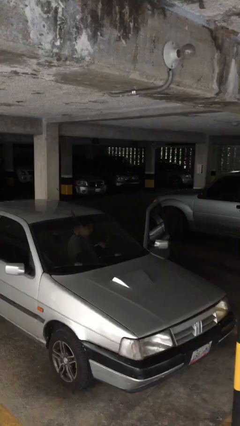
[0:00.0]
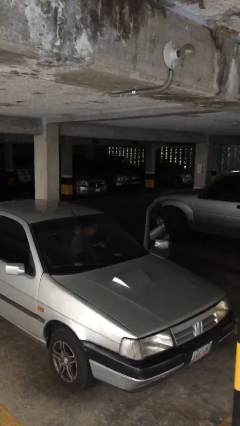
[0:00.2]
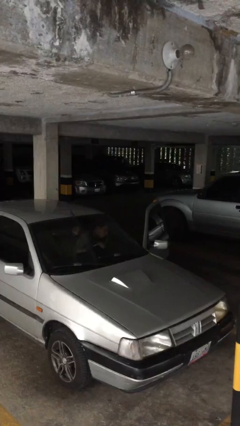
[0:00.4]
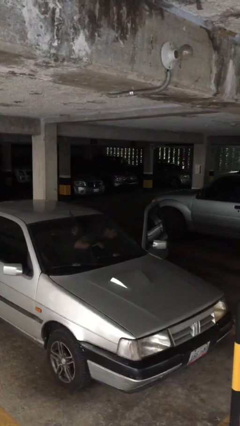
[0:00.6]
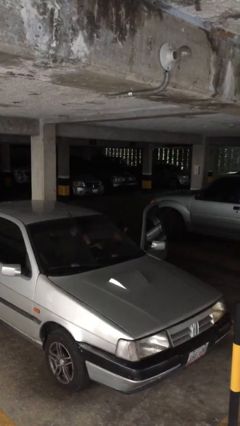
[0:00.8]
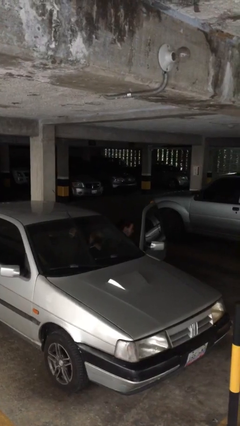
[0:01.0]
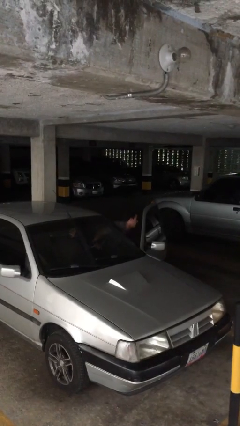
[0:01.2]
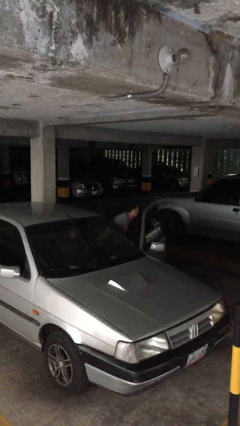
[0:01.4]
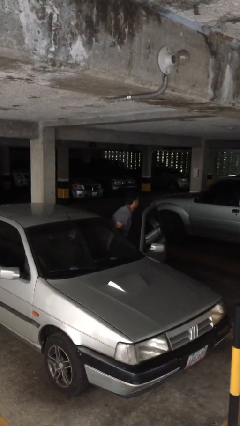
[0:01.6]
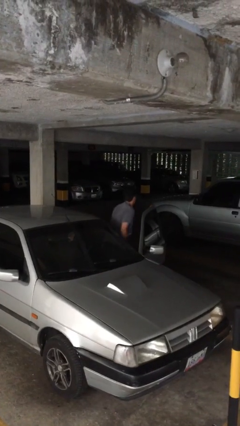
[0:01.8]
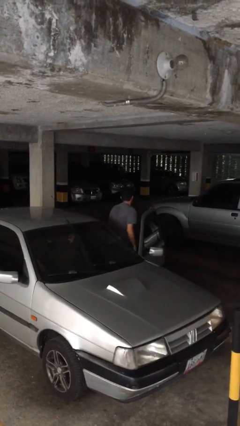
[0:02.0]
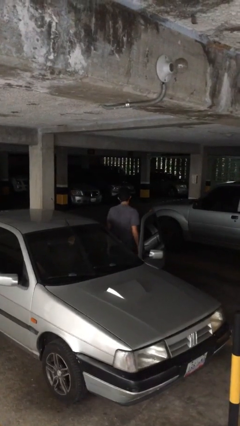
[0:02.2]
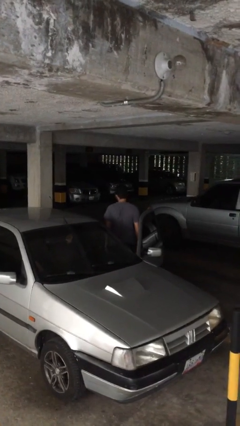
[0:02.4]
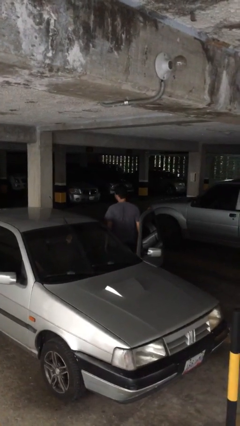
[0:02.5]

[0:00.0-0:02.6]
person exits car

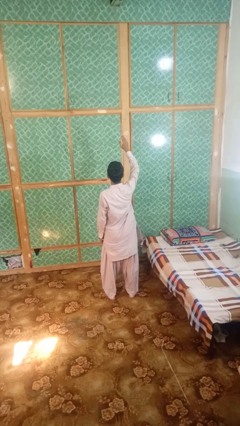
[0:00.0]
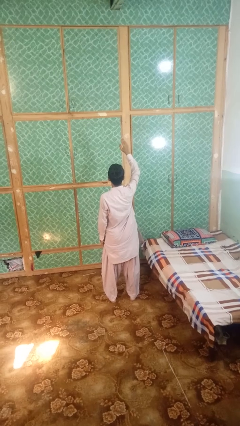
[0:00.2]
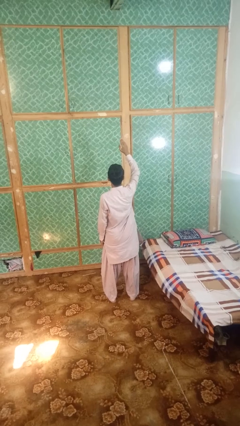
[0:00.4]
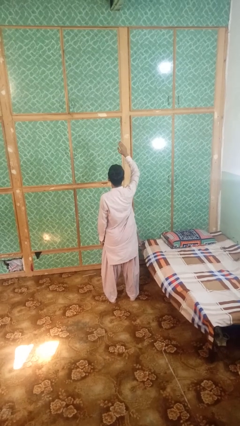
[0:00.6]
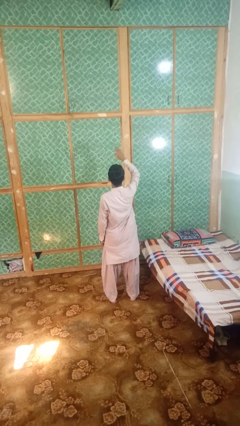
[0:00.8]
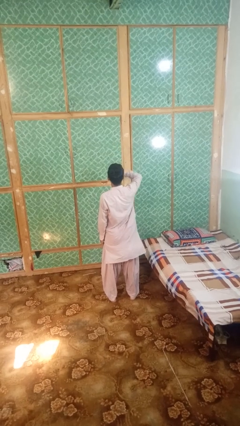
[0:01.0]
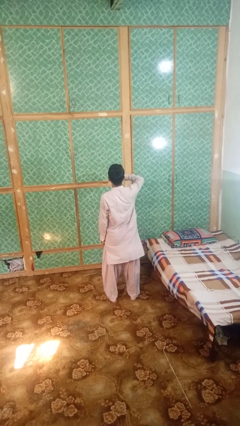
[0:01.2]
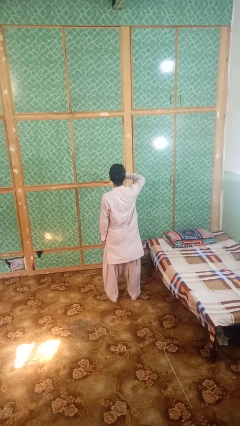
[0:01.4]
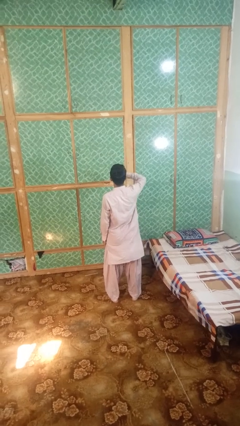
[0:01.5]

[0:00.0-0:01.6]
person gestures swipe down

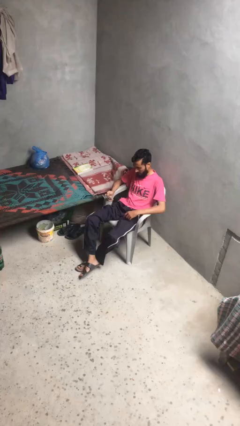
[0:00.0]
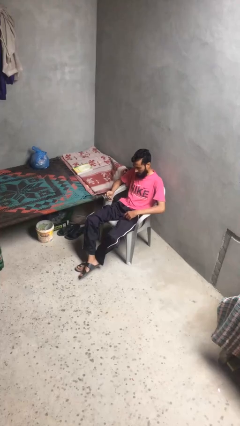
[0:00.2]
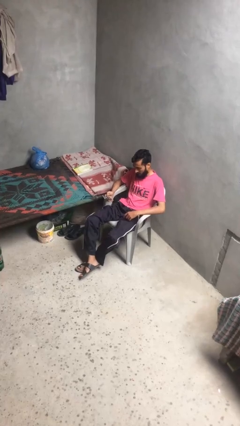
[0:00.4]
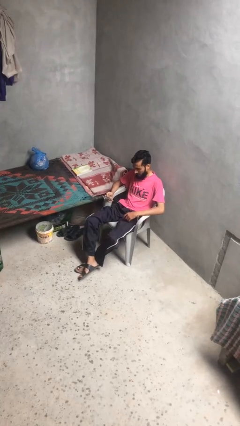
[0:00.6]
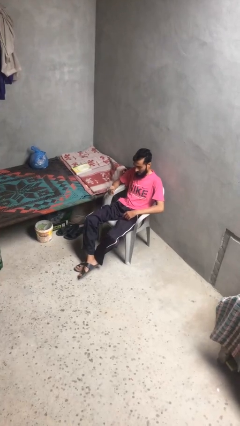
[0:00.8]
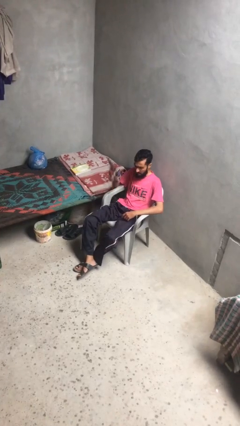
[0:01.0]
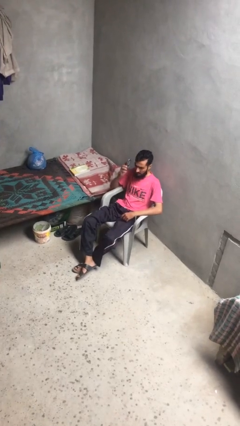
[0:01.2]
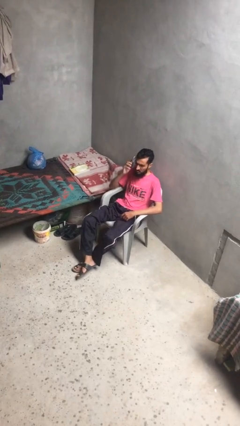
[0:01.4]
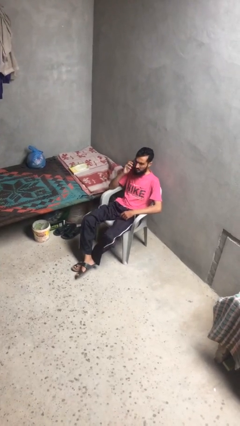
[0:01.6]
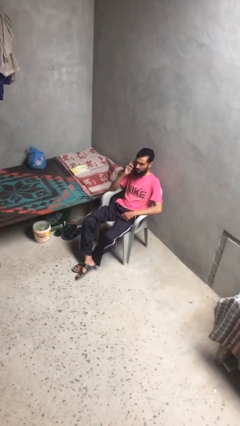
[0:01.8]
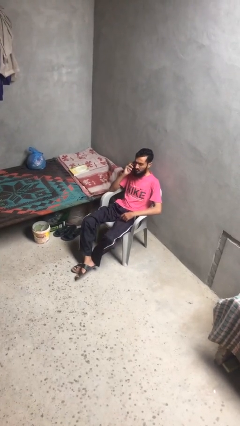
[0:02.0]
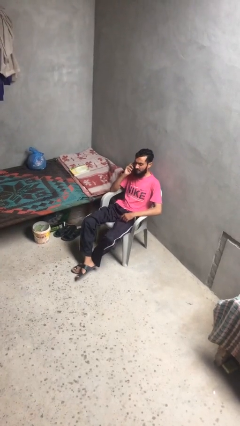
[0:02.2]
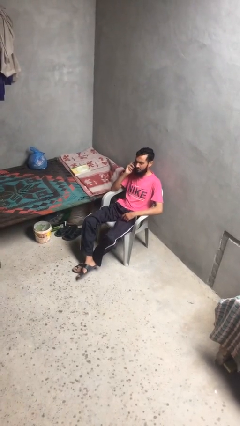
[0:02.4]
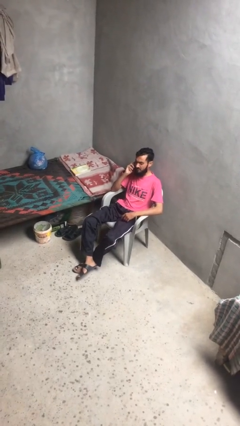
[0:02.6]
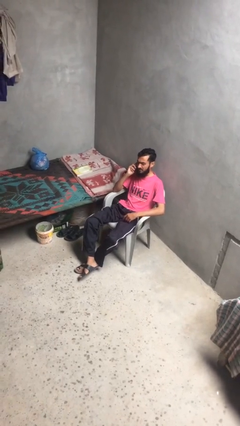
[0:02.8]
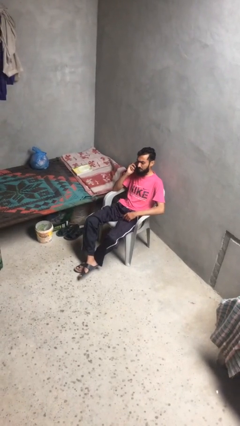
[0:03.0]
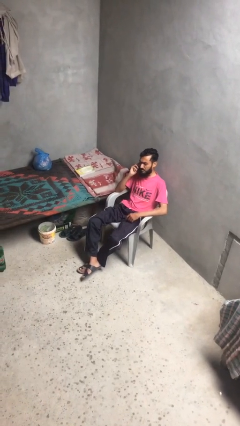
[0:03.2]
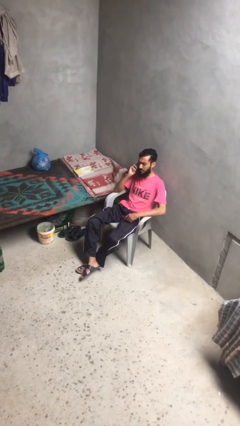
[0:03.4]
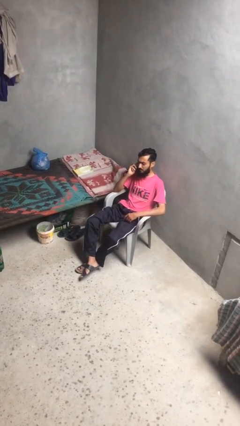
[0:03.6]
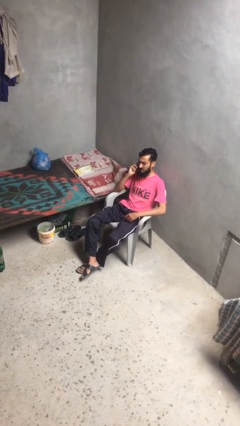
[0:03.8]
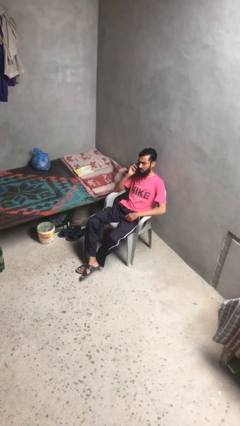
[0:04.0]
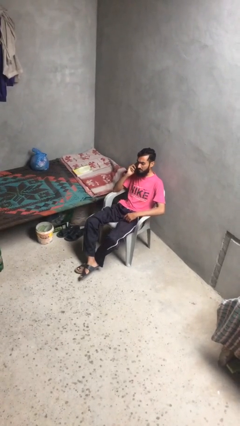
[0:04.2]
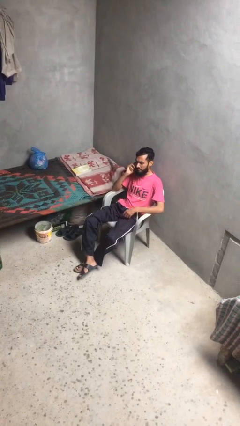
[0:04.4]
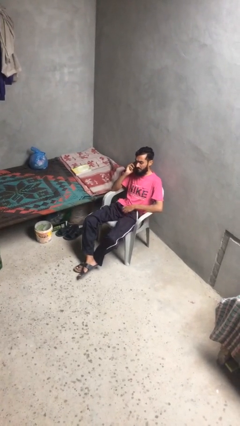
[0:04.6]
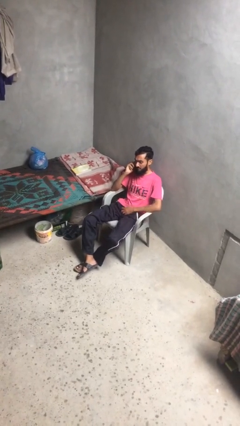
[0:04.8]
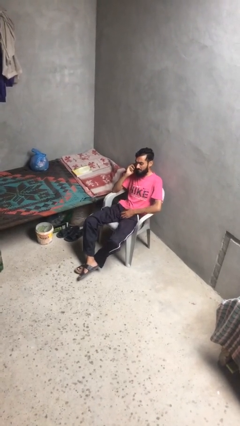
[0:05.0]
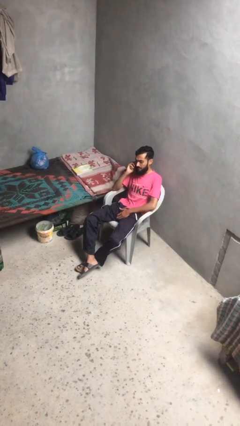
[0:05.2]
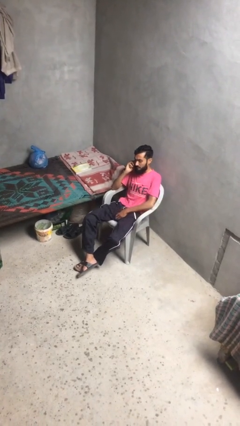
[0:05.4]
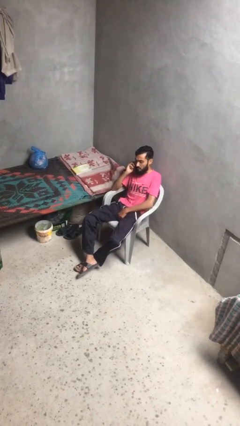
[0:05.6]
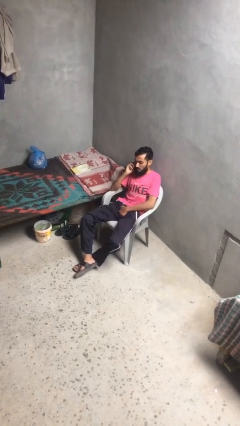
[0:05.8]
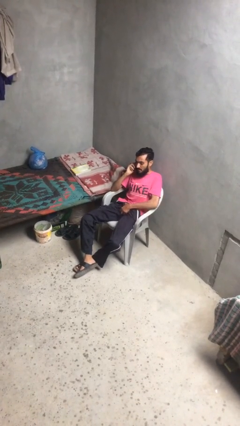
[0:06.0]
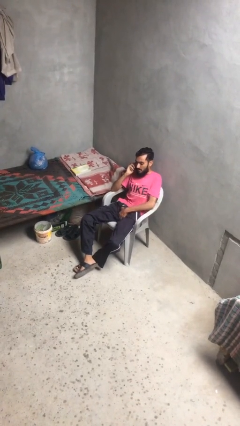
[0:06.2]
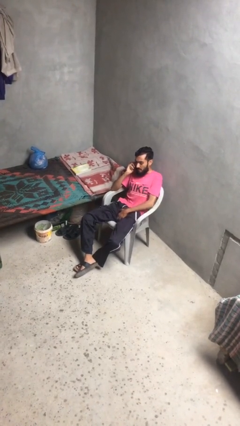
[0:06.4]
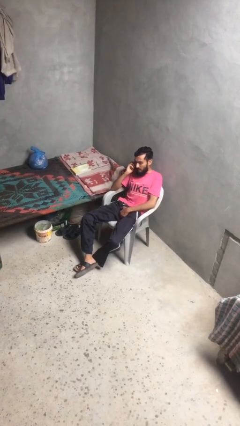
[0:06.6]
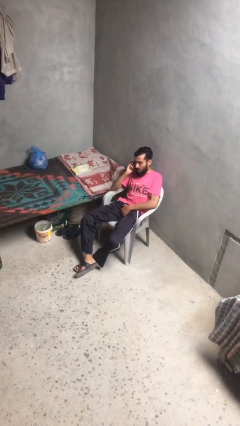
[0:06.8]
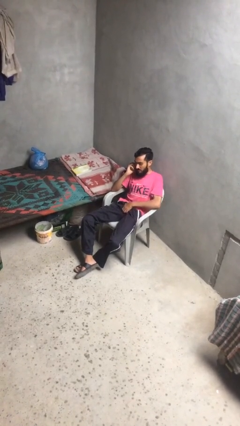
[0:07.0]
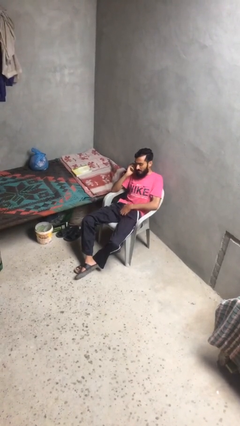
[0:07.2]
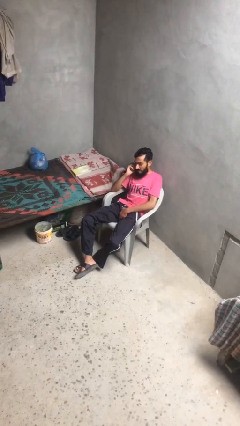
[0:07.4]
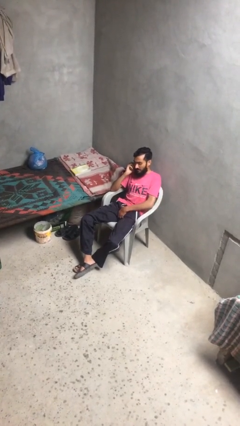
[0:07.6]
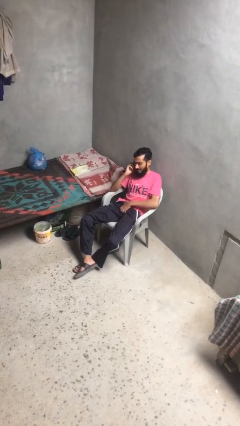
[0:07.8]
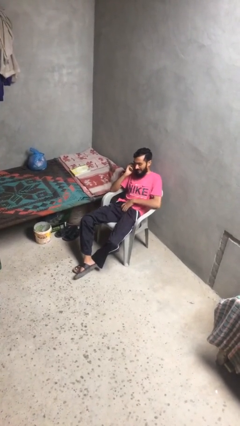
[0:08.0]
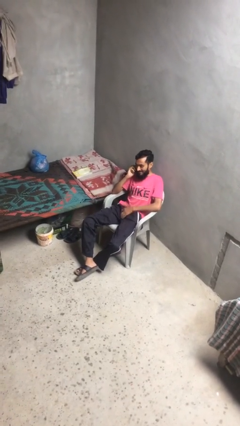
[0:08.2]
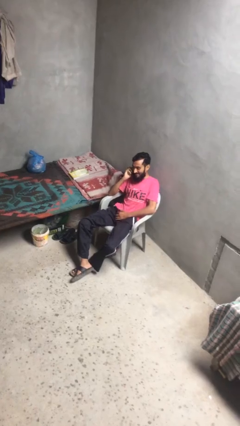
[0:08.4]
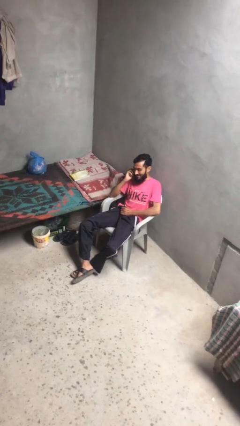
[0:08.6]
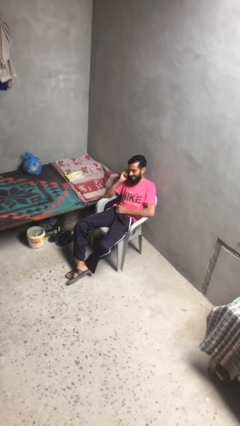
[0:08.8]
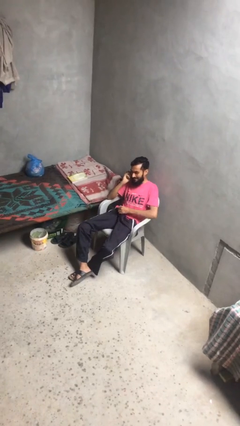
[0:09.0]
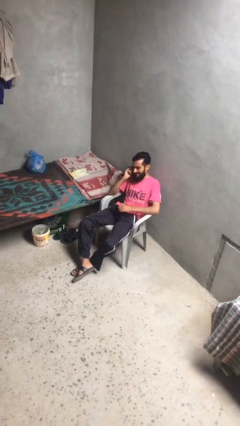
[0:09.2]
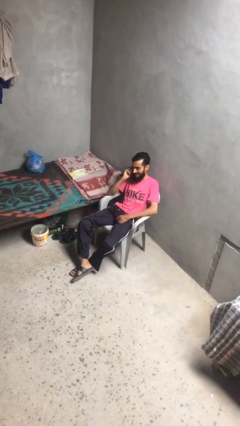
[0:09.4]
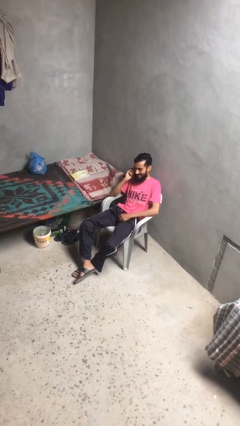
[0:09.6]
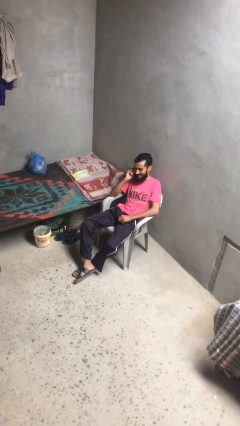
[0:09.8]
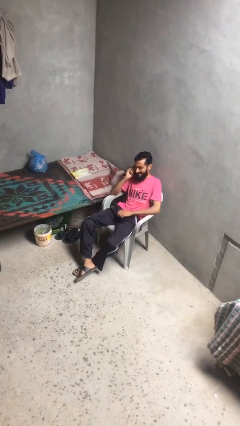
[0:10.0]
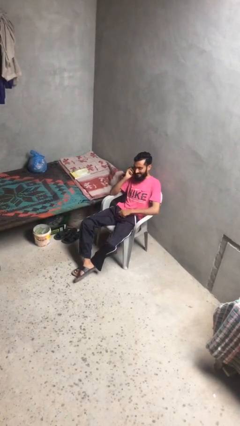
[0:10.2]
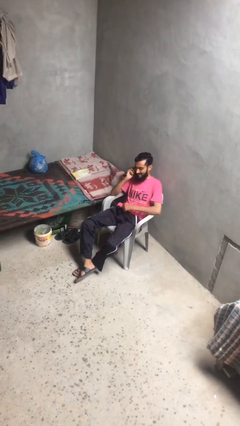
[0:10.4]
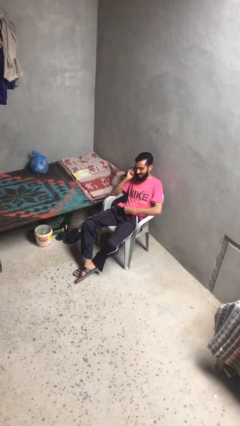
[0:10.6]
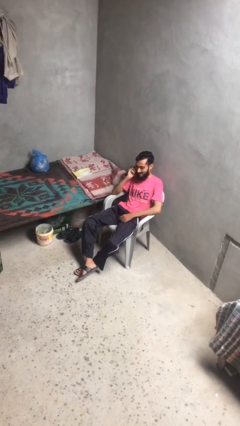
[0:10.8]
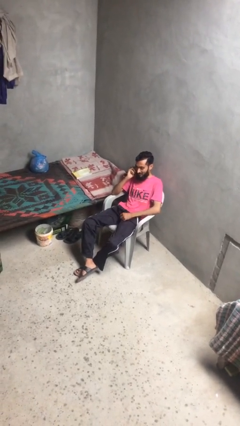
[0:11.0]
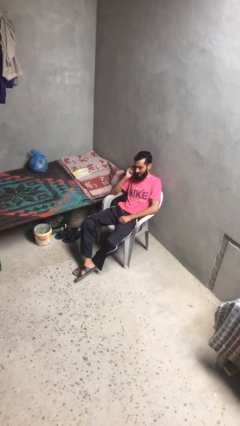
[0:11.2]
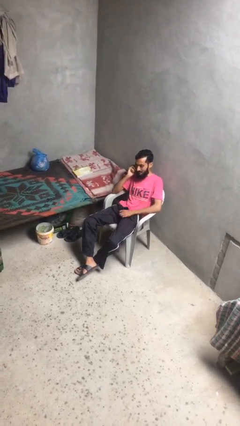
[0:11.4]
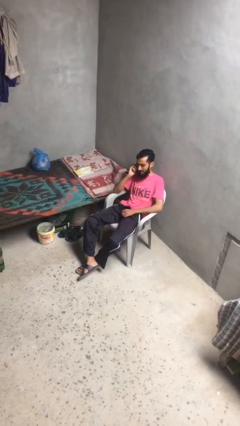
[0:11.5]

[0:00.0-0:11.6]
person talks on phone

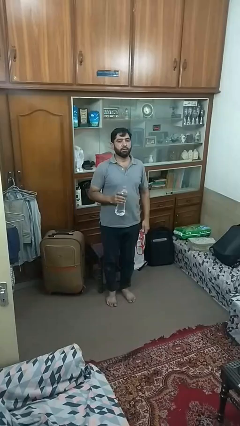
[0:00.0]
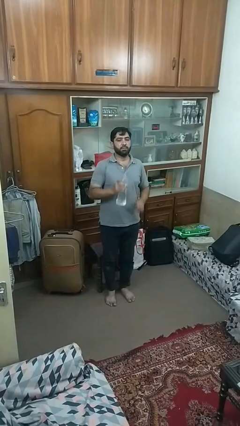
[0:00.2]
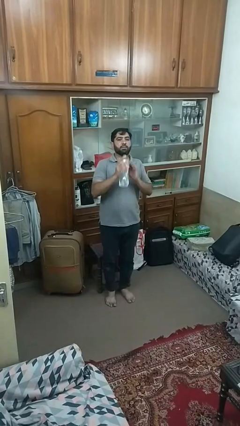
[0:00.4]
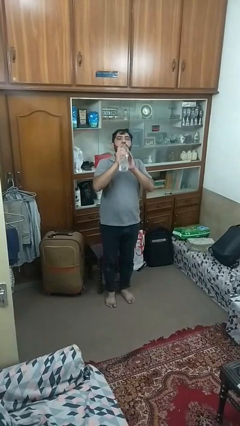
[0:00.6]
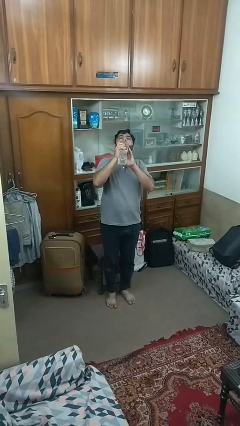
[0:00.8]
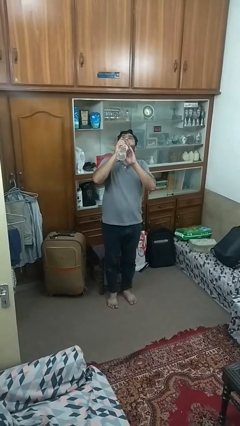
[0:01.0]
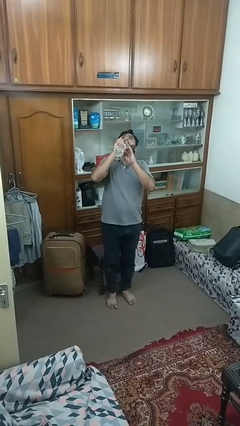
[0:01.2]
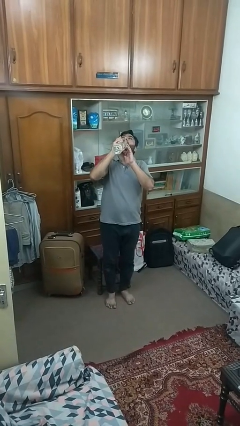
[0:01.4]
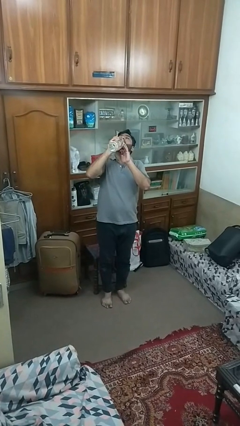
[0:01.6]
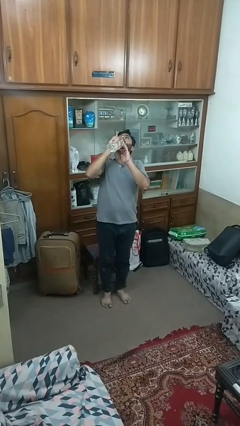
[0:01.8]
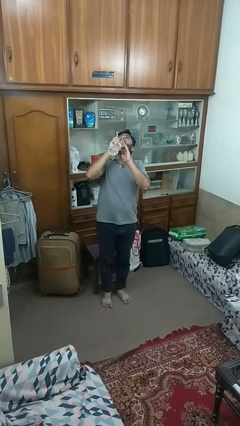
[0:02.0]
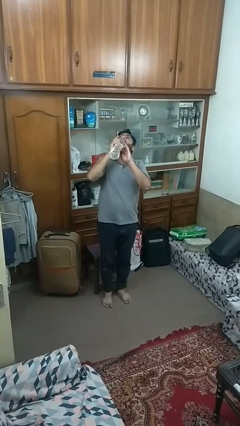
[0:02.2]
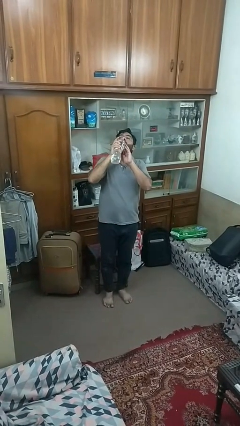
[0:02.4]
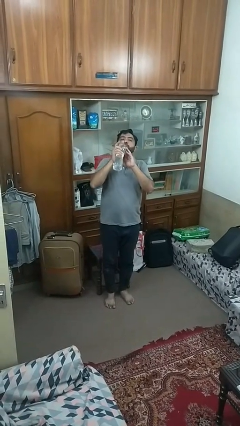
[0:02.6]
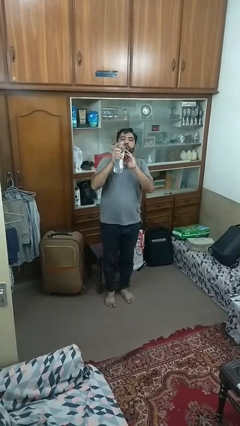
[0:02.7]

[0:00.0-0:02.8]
person drinks from bottle
